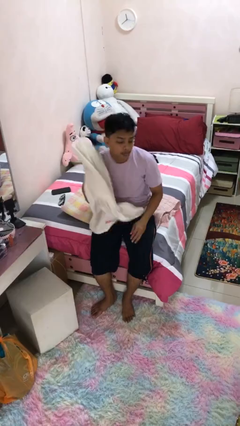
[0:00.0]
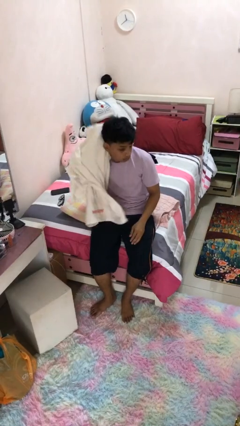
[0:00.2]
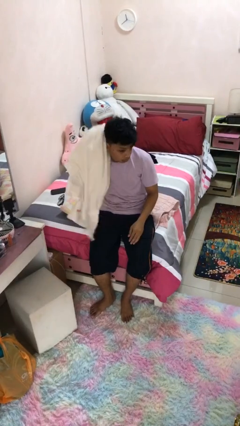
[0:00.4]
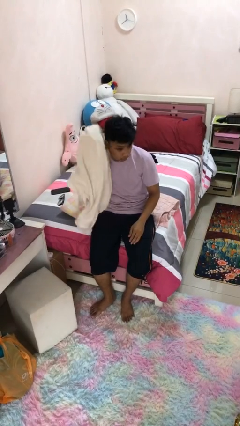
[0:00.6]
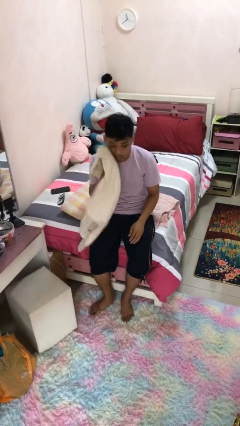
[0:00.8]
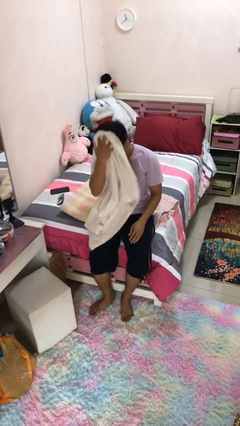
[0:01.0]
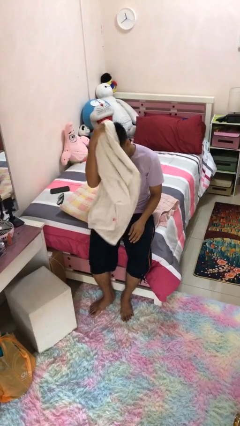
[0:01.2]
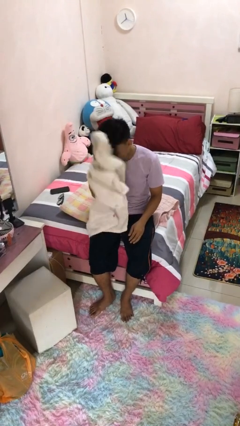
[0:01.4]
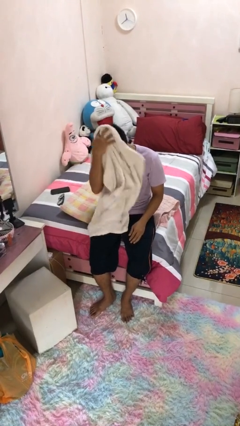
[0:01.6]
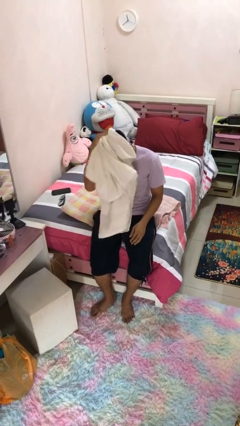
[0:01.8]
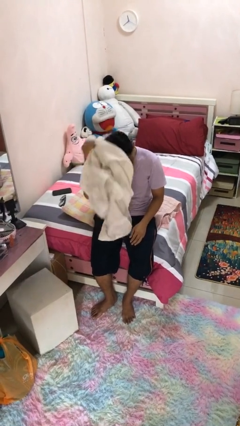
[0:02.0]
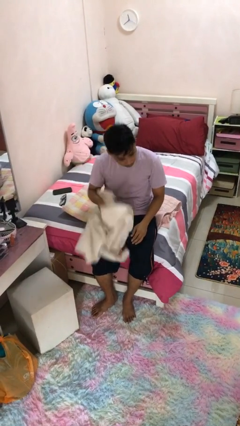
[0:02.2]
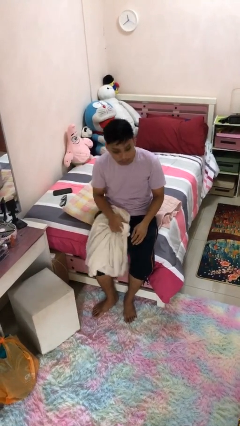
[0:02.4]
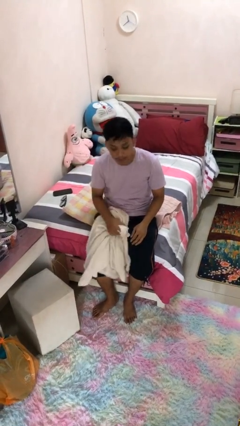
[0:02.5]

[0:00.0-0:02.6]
person dries hair with towel

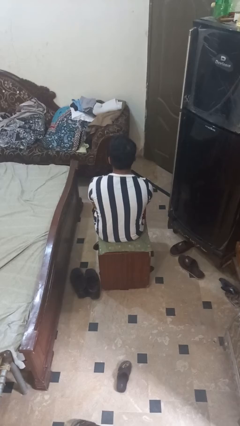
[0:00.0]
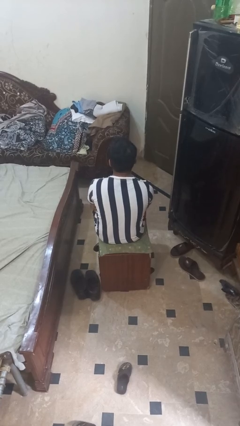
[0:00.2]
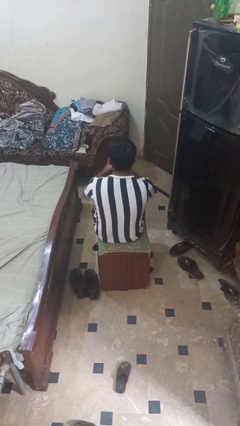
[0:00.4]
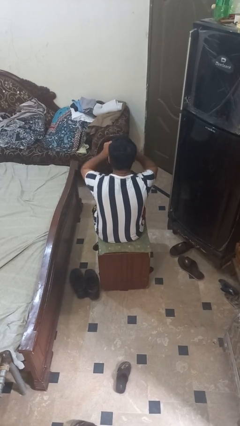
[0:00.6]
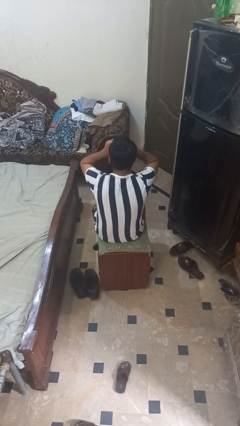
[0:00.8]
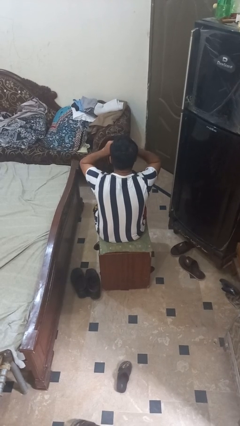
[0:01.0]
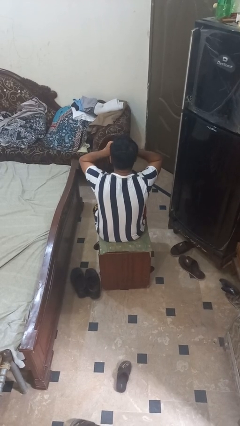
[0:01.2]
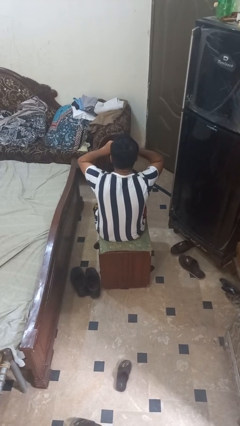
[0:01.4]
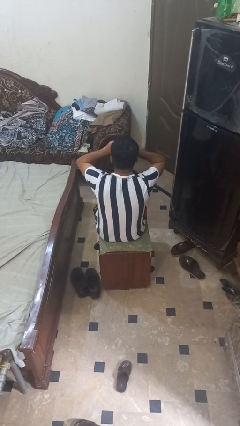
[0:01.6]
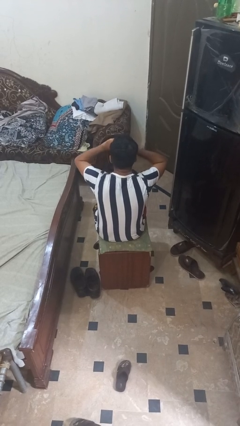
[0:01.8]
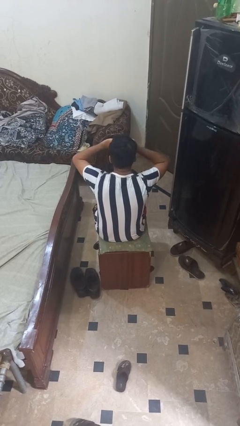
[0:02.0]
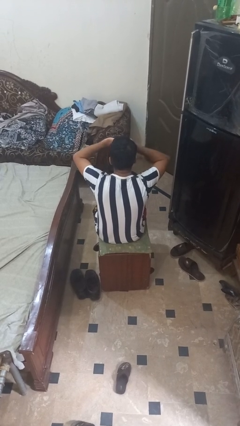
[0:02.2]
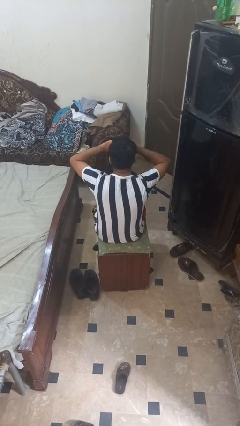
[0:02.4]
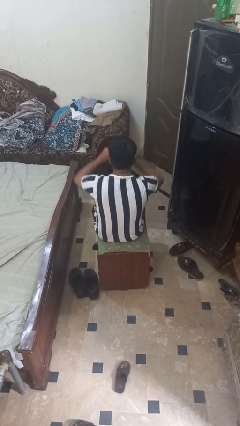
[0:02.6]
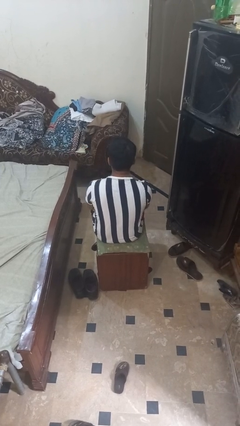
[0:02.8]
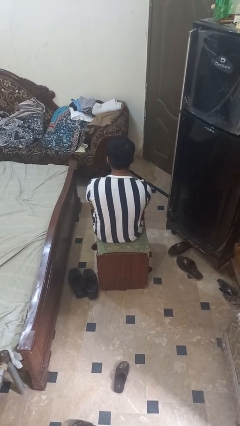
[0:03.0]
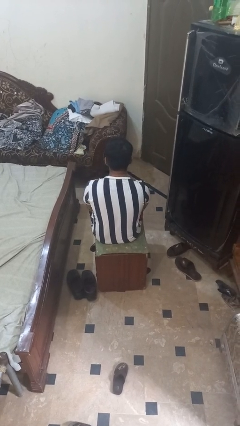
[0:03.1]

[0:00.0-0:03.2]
person rubs eyes

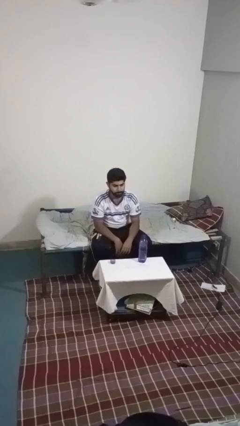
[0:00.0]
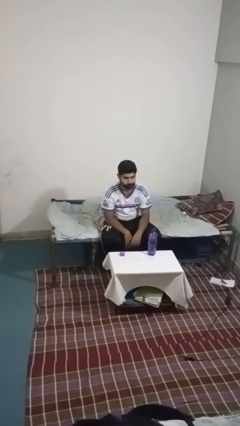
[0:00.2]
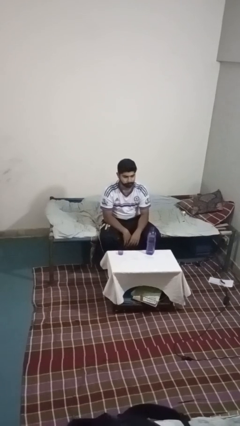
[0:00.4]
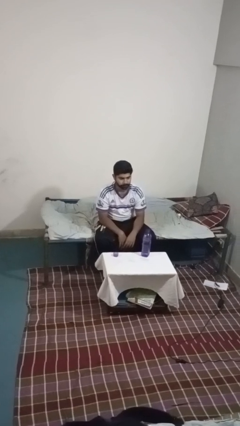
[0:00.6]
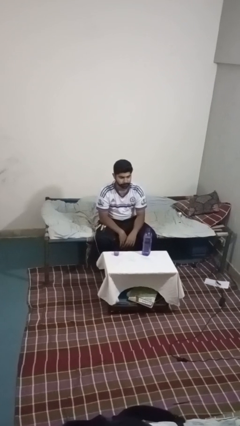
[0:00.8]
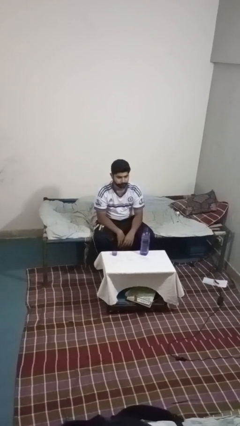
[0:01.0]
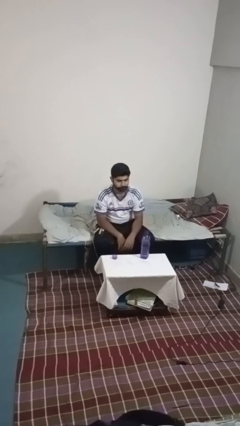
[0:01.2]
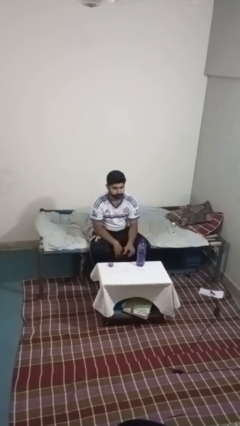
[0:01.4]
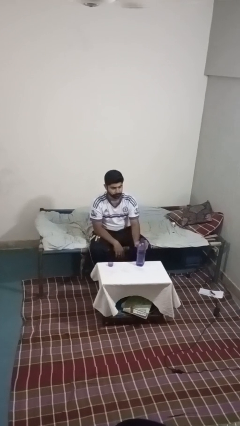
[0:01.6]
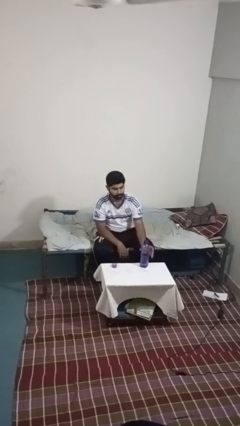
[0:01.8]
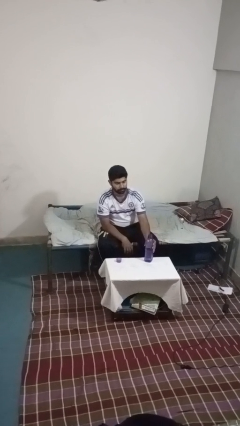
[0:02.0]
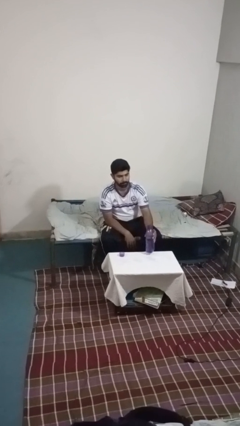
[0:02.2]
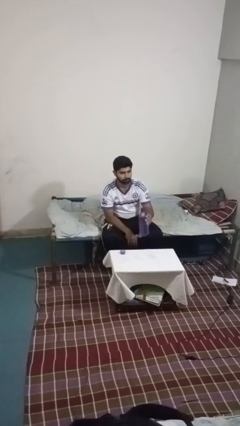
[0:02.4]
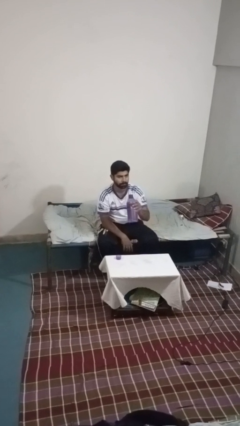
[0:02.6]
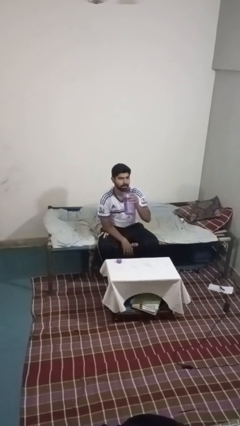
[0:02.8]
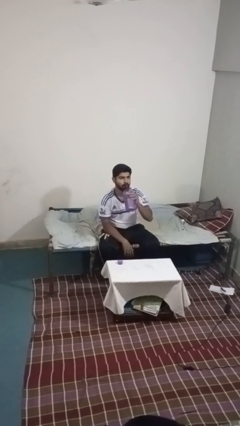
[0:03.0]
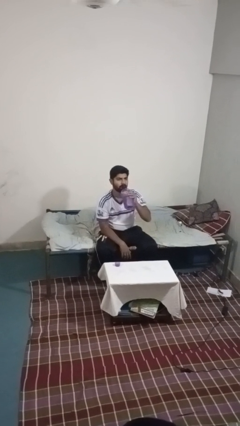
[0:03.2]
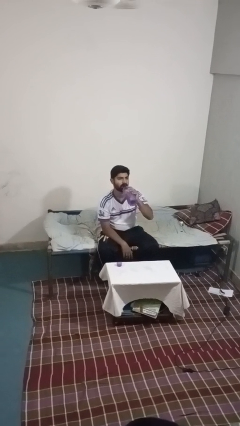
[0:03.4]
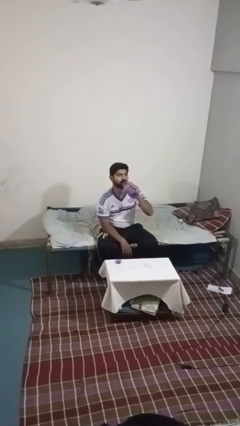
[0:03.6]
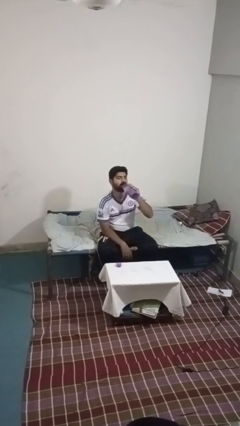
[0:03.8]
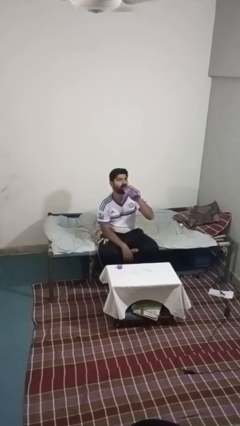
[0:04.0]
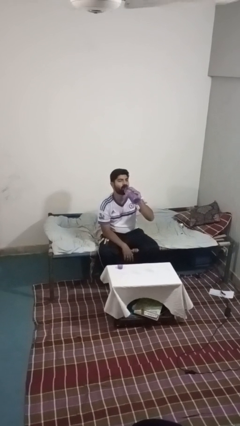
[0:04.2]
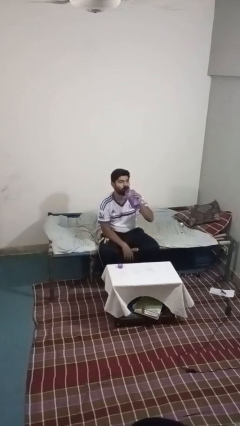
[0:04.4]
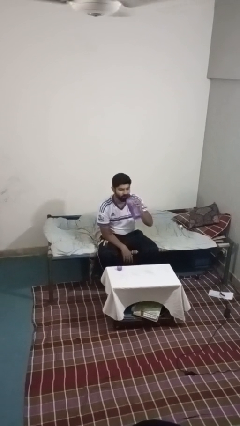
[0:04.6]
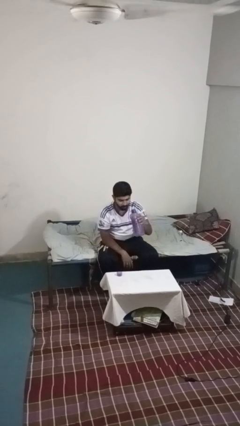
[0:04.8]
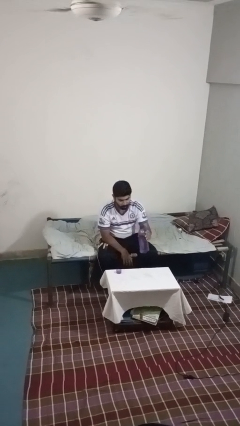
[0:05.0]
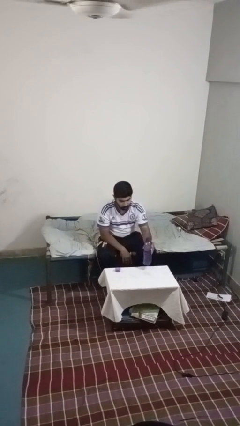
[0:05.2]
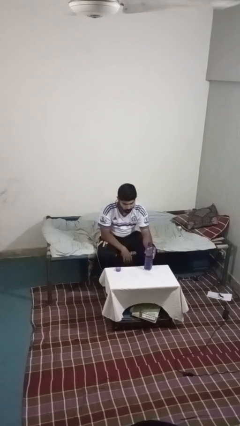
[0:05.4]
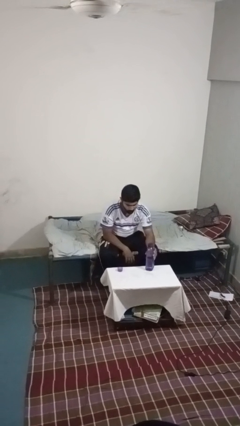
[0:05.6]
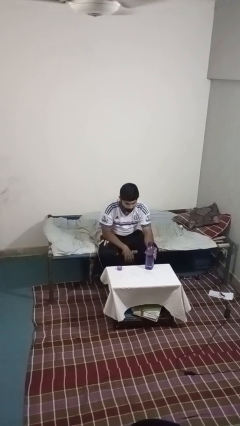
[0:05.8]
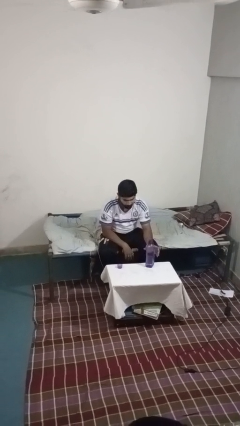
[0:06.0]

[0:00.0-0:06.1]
person drinks from bottle

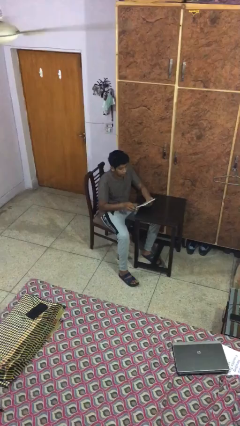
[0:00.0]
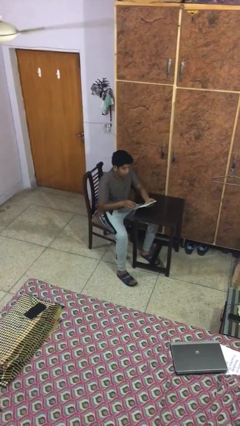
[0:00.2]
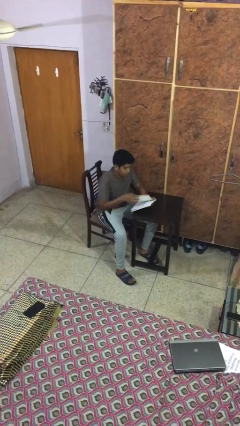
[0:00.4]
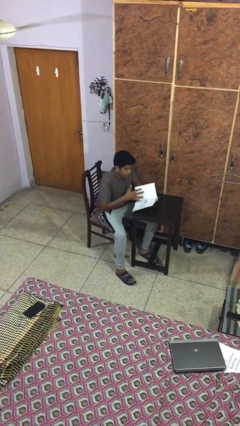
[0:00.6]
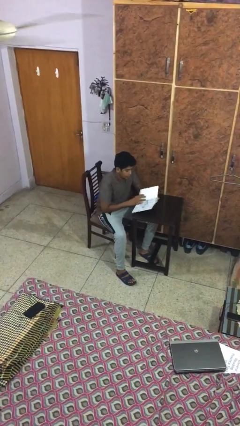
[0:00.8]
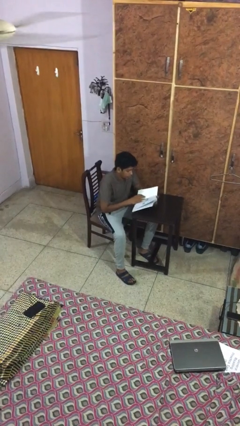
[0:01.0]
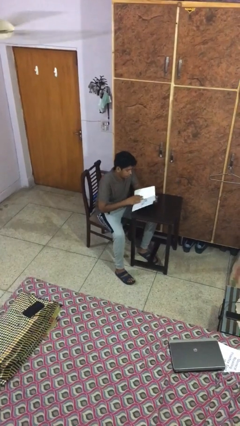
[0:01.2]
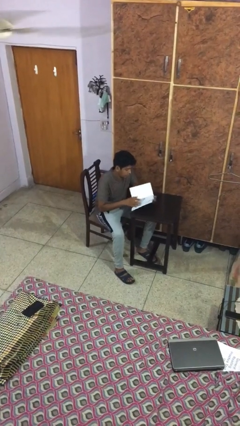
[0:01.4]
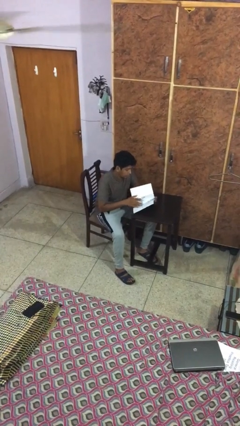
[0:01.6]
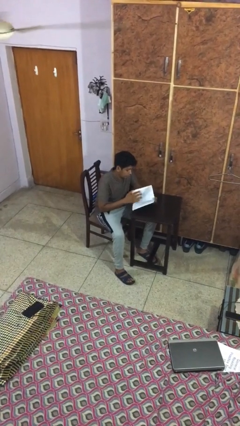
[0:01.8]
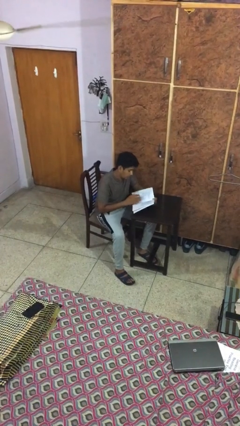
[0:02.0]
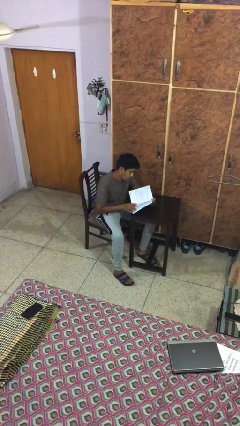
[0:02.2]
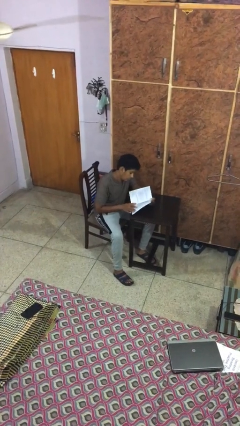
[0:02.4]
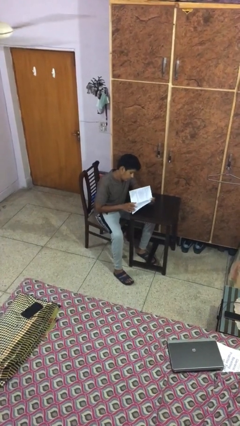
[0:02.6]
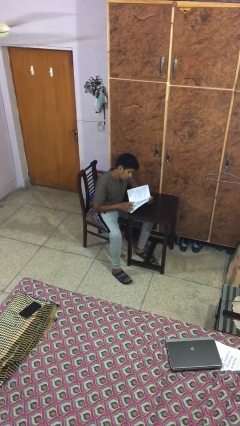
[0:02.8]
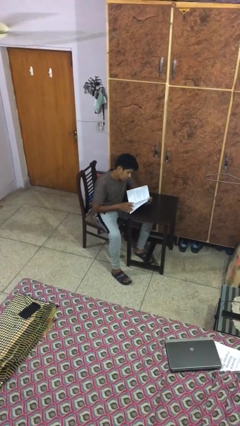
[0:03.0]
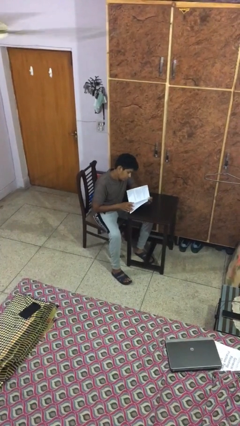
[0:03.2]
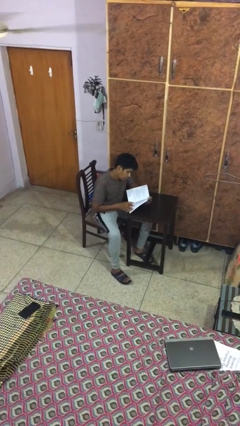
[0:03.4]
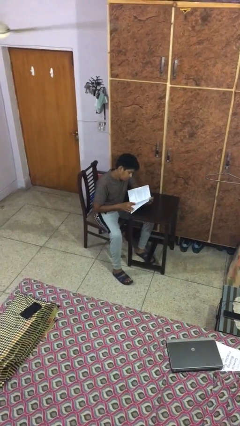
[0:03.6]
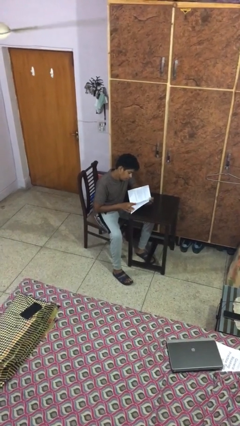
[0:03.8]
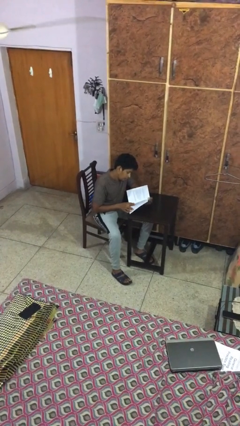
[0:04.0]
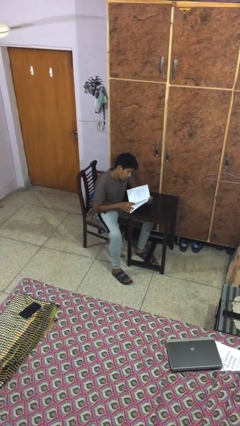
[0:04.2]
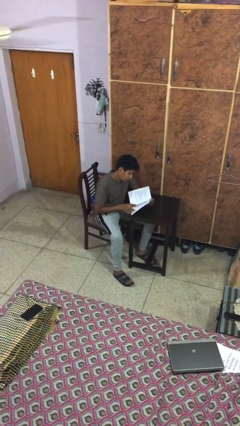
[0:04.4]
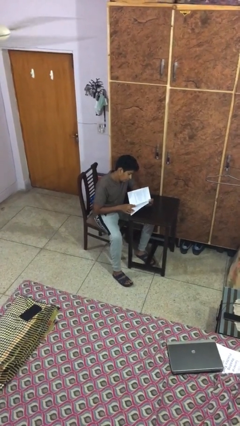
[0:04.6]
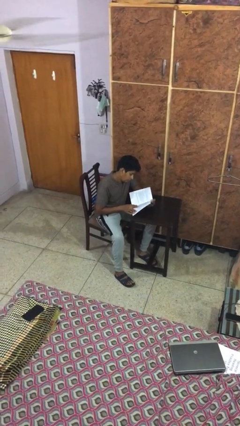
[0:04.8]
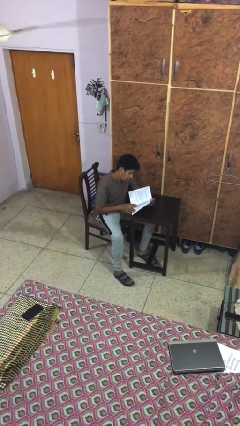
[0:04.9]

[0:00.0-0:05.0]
person reads document

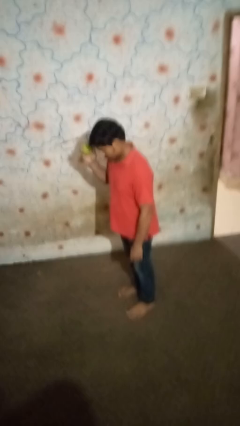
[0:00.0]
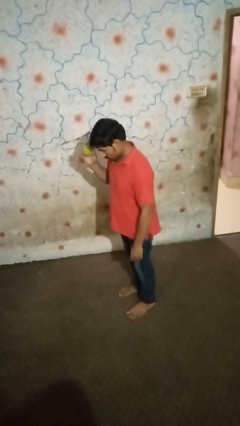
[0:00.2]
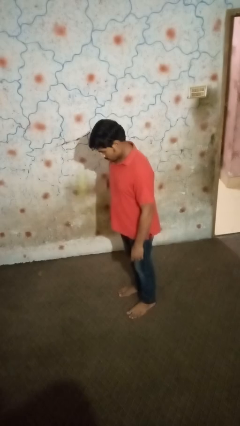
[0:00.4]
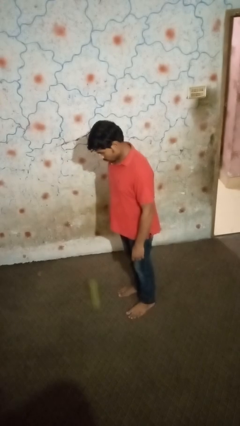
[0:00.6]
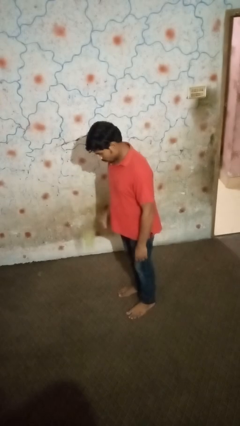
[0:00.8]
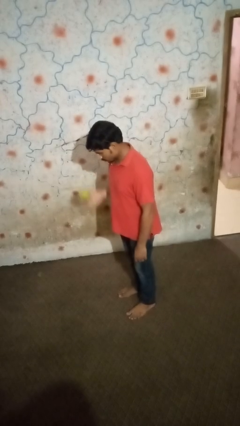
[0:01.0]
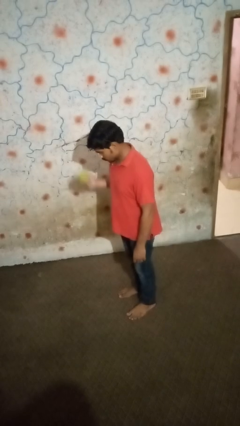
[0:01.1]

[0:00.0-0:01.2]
person bounces ball on floor
